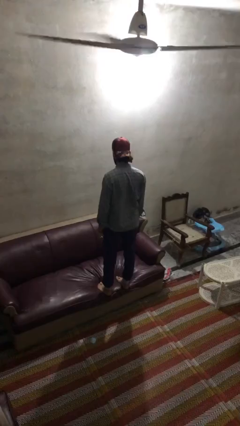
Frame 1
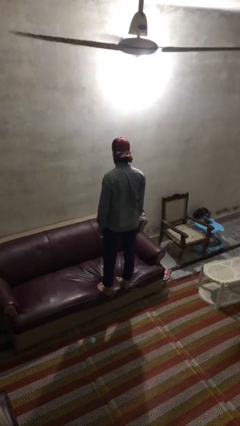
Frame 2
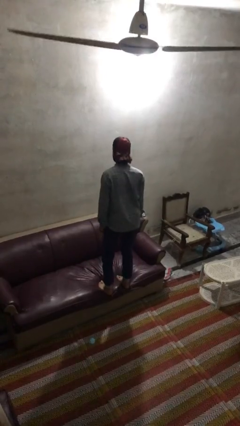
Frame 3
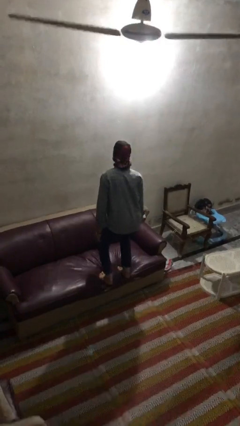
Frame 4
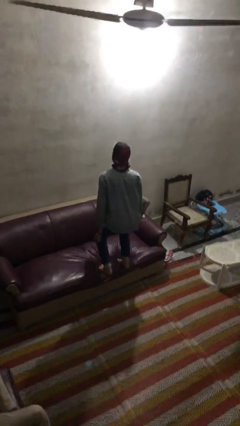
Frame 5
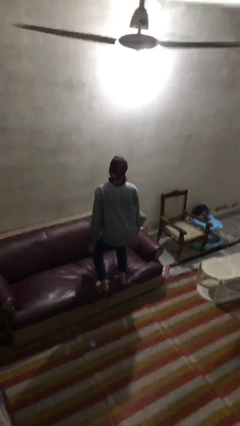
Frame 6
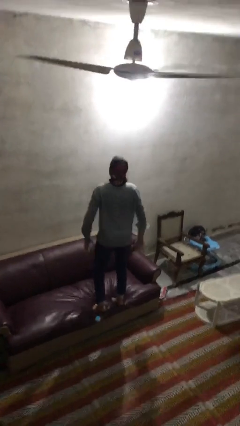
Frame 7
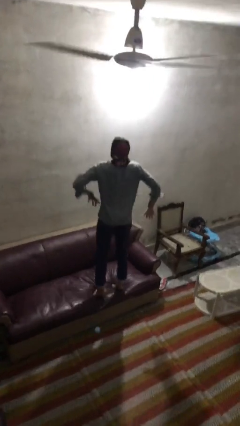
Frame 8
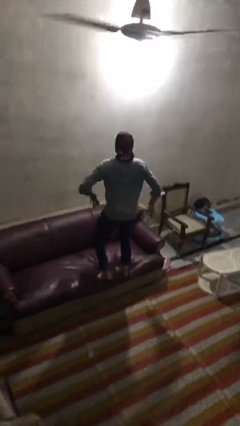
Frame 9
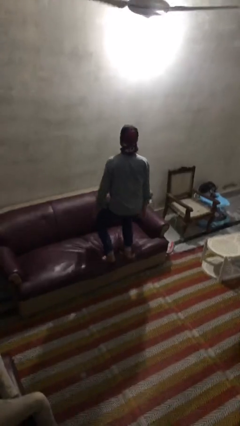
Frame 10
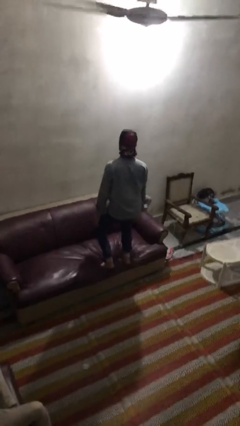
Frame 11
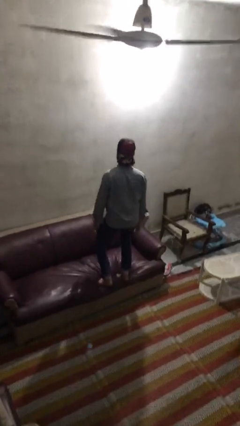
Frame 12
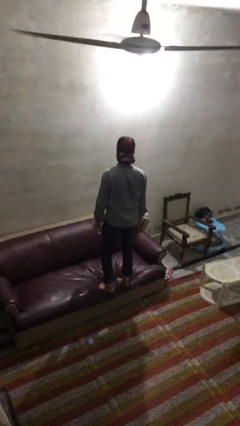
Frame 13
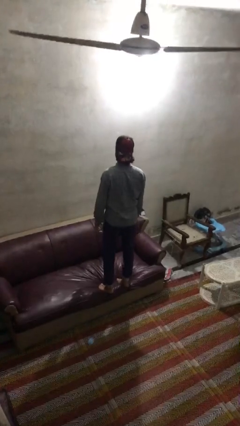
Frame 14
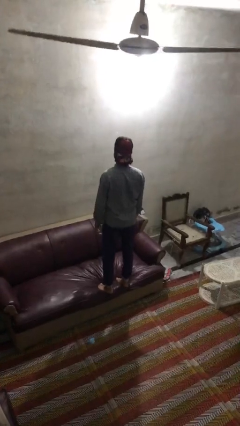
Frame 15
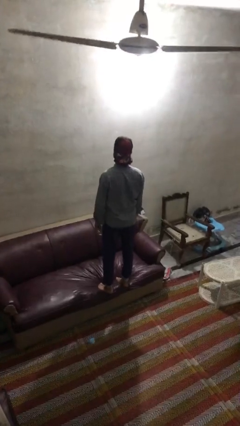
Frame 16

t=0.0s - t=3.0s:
person jumps on couch

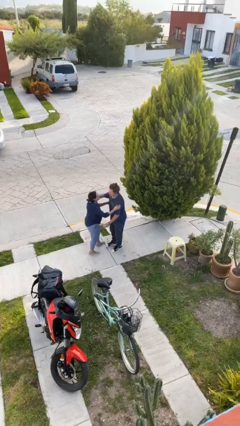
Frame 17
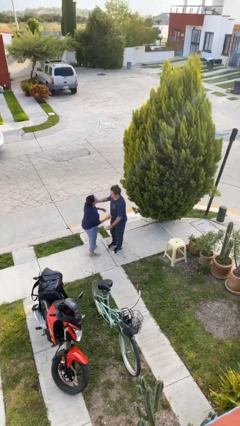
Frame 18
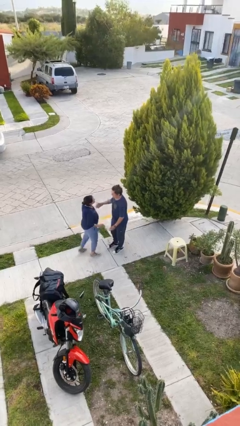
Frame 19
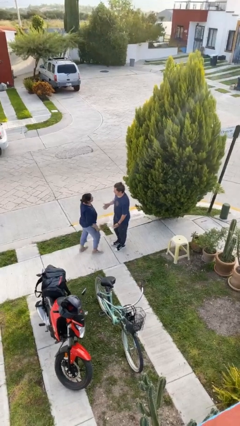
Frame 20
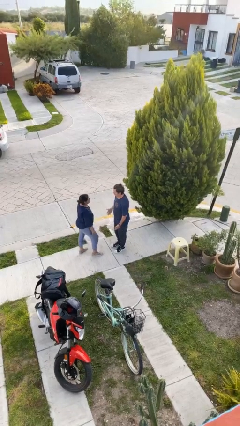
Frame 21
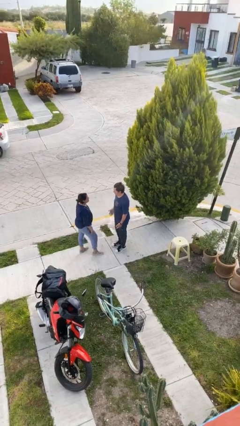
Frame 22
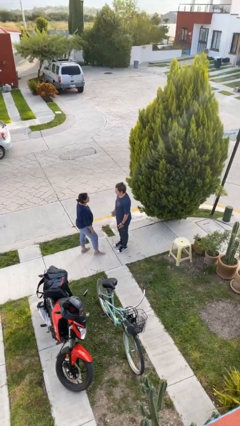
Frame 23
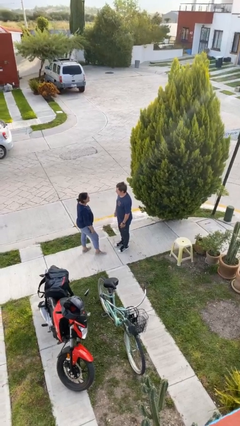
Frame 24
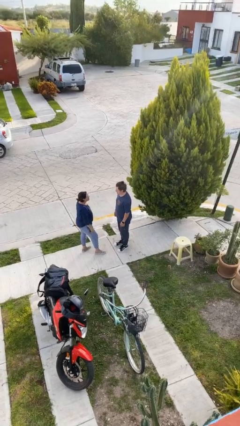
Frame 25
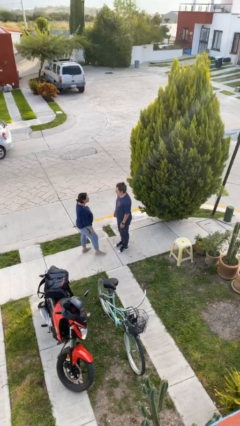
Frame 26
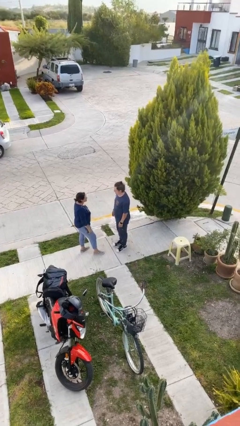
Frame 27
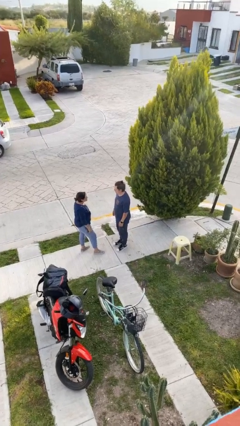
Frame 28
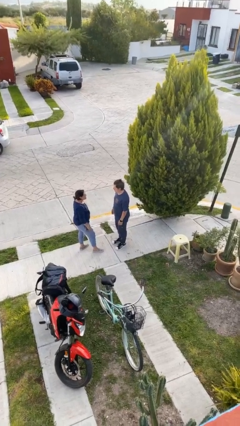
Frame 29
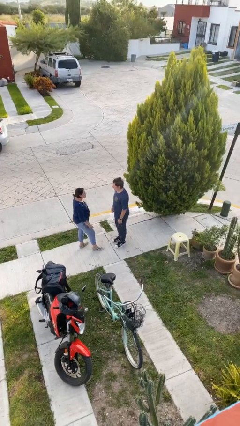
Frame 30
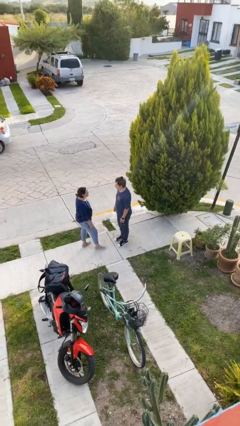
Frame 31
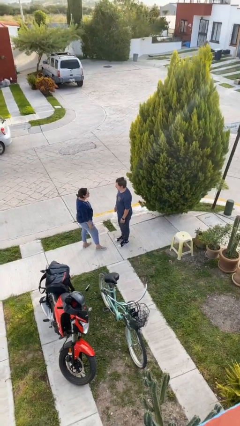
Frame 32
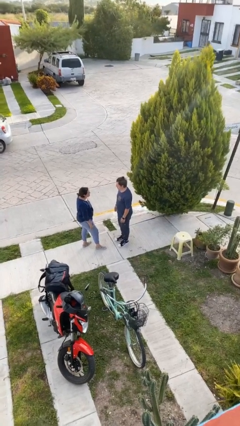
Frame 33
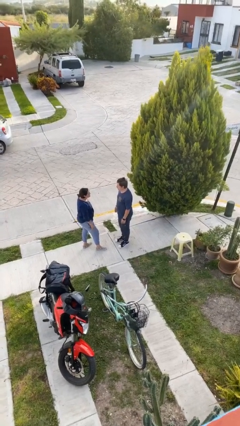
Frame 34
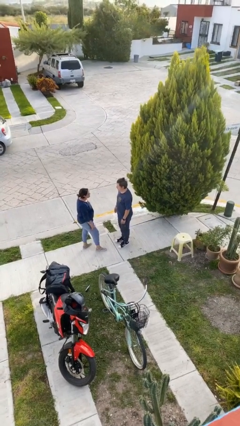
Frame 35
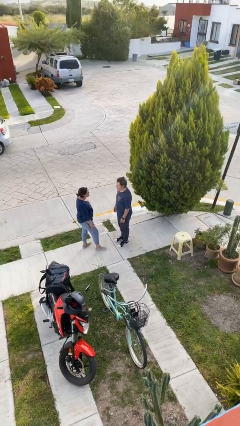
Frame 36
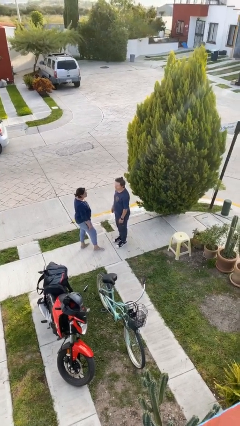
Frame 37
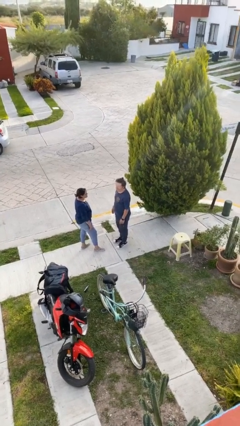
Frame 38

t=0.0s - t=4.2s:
person talks to person

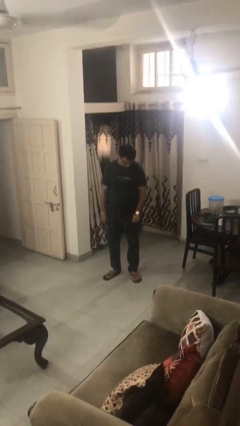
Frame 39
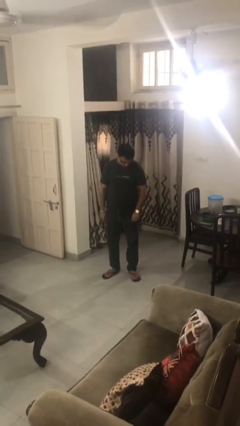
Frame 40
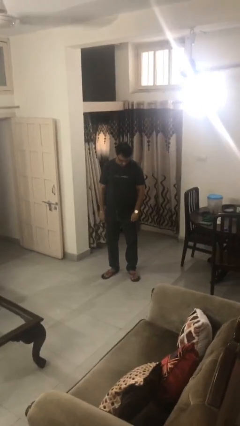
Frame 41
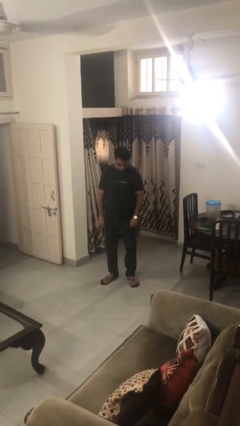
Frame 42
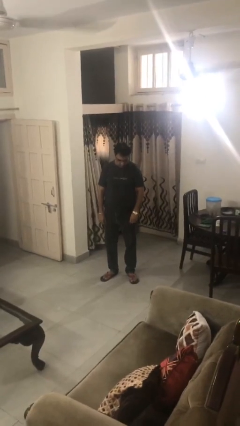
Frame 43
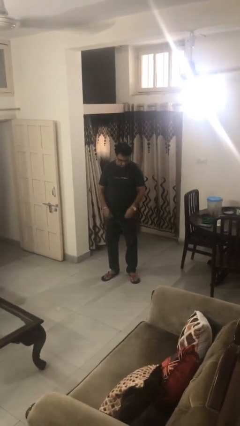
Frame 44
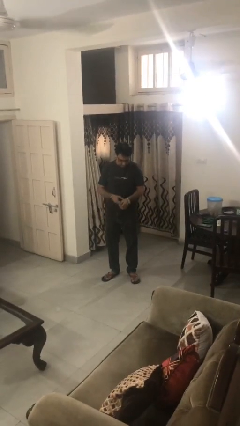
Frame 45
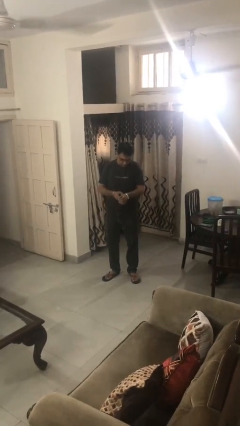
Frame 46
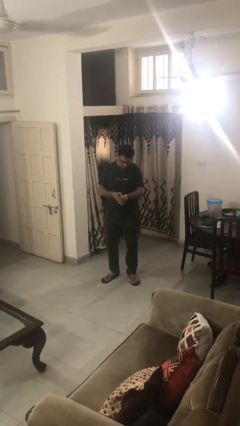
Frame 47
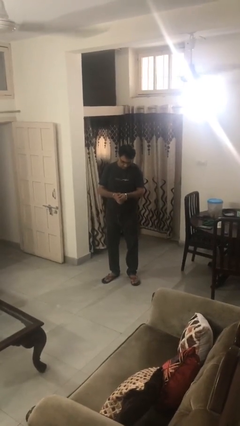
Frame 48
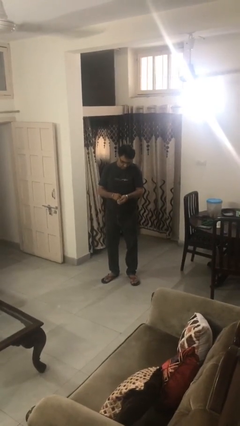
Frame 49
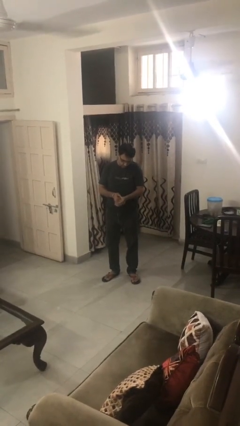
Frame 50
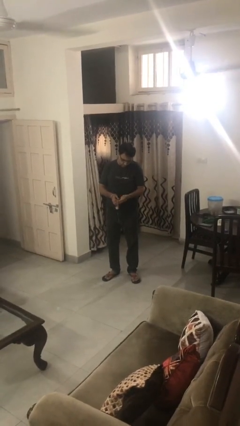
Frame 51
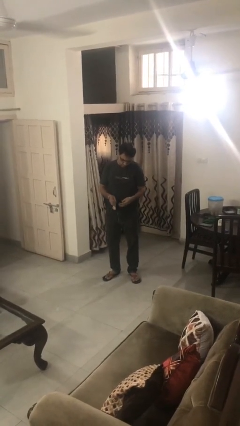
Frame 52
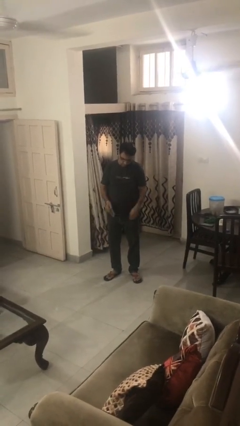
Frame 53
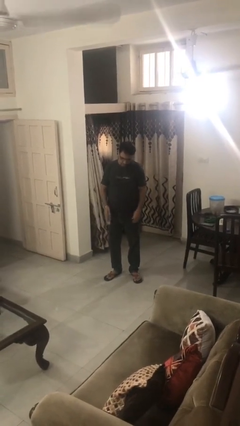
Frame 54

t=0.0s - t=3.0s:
person takes off wristwatch

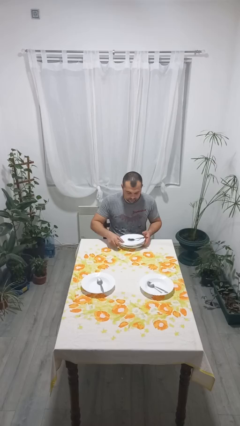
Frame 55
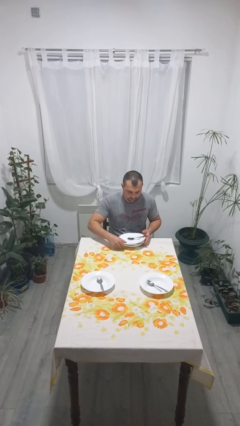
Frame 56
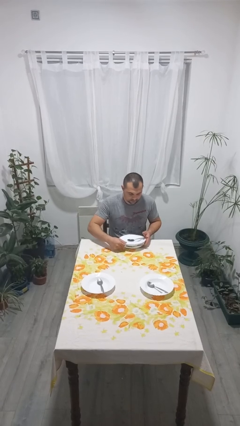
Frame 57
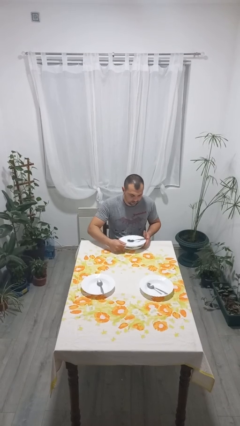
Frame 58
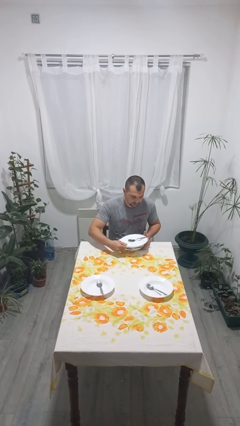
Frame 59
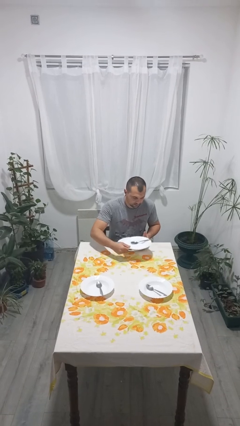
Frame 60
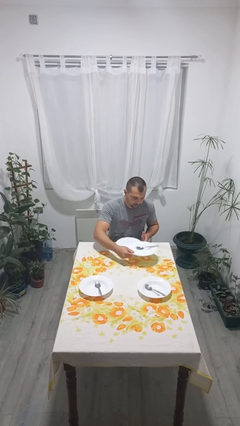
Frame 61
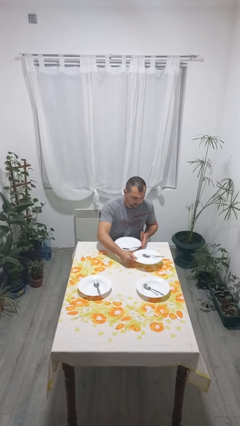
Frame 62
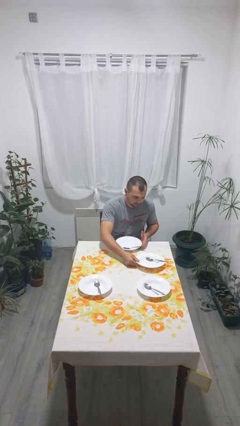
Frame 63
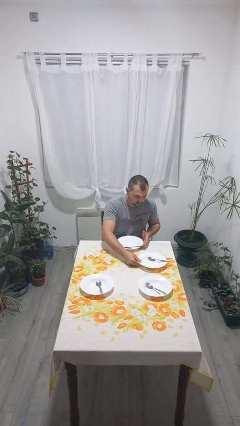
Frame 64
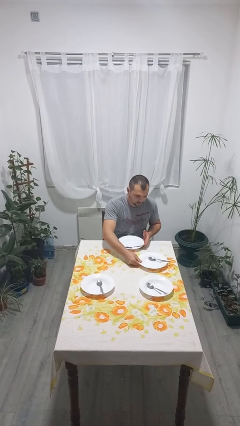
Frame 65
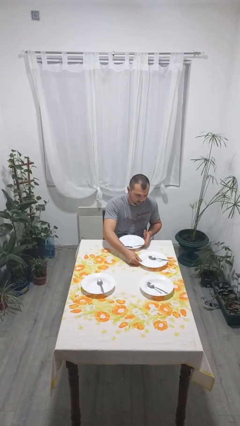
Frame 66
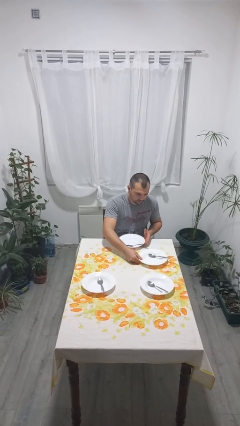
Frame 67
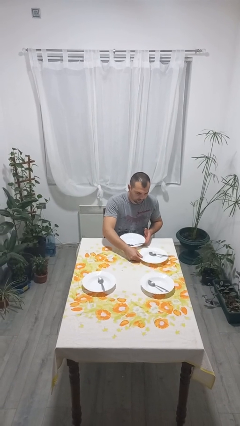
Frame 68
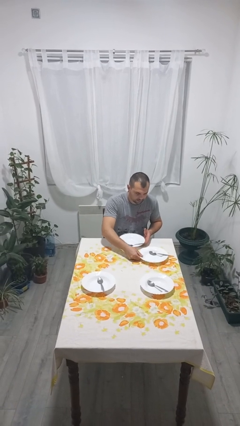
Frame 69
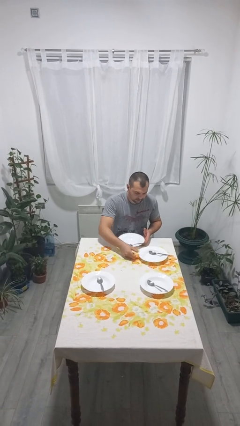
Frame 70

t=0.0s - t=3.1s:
person sets table

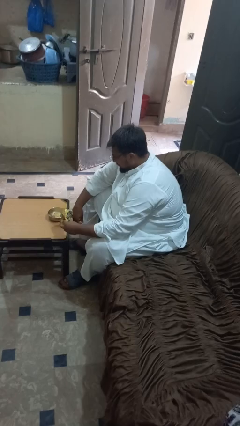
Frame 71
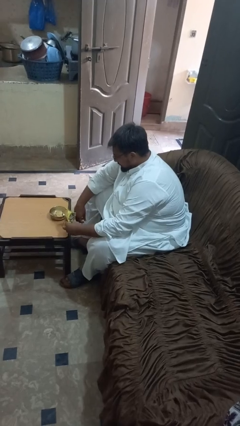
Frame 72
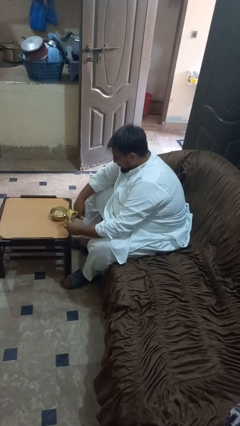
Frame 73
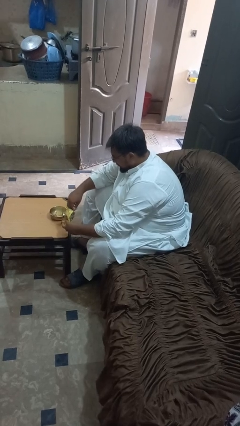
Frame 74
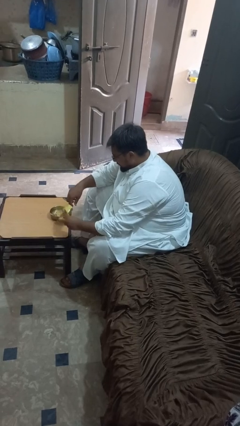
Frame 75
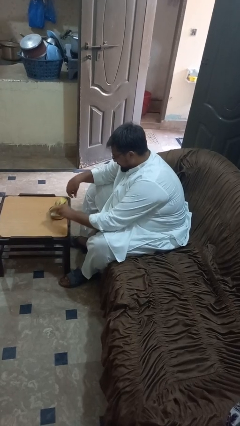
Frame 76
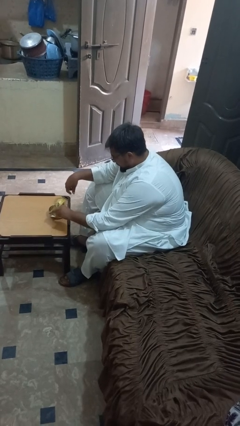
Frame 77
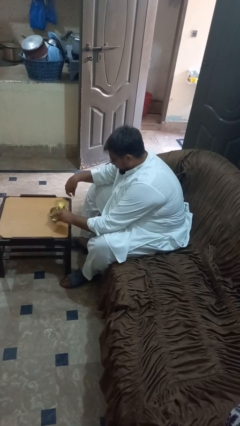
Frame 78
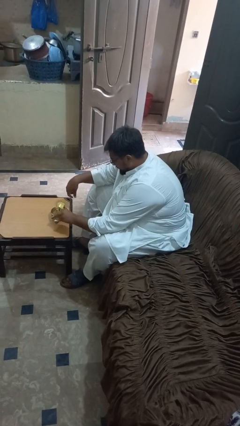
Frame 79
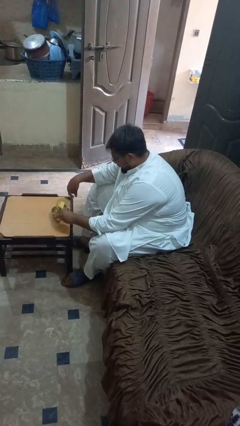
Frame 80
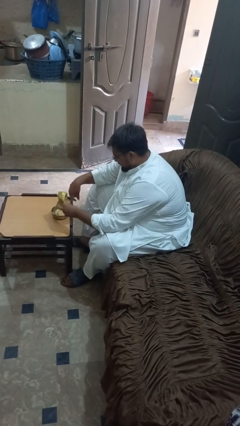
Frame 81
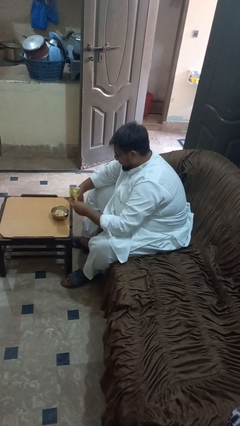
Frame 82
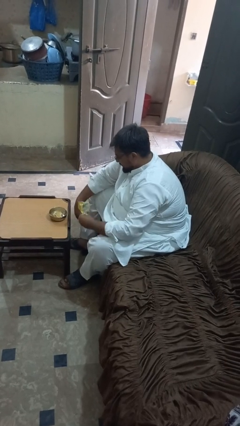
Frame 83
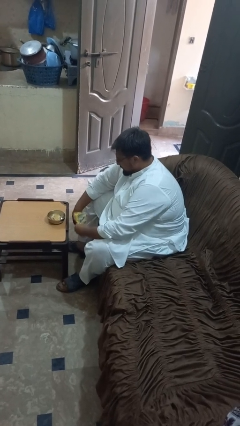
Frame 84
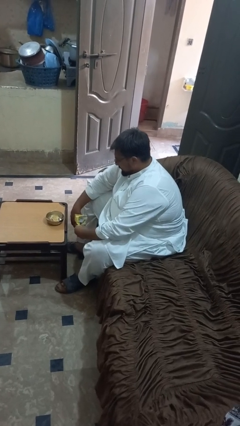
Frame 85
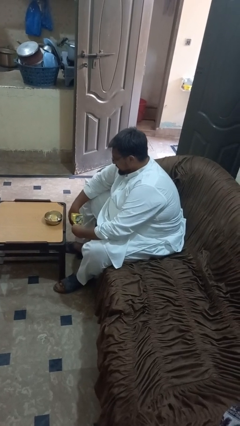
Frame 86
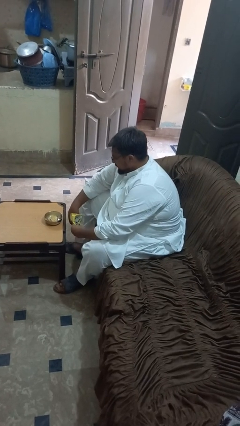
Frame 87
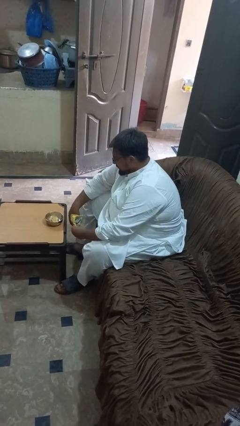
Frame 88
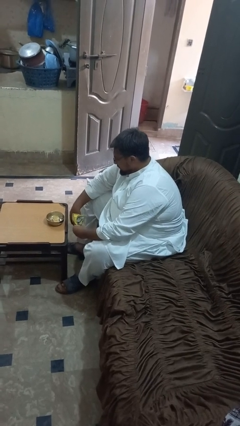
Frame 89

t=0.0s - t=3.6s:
person pours into bowl

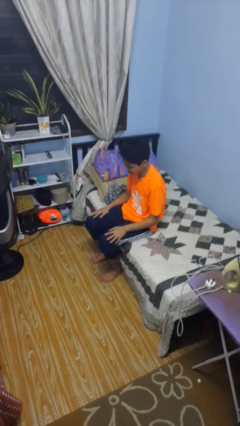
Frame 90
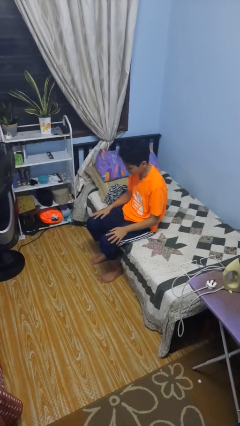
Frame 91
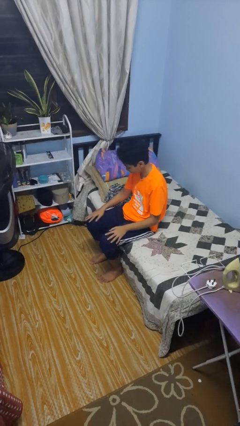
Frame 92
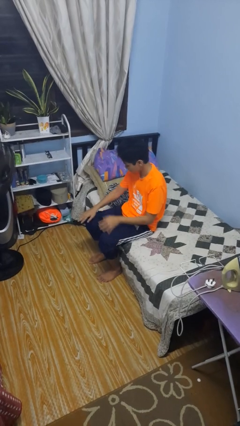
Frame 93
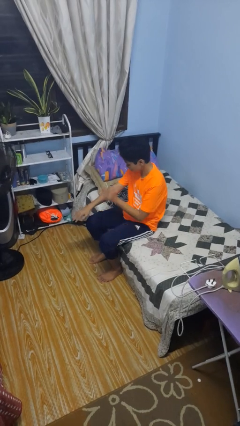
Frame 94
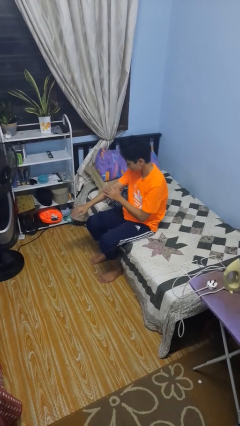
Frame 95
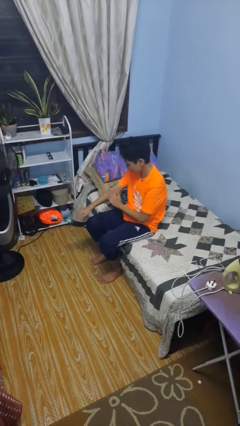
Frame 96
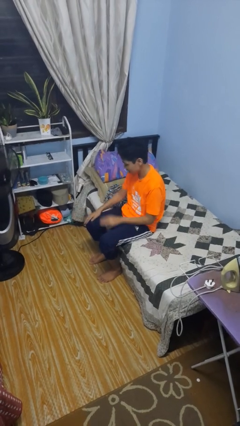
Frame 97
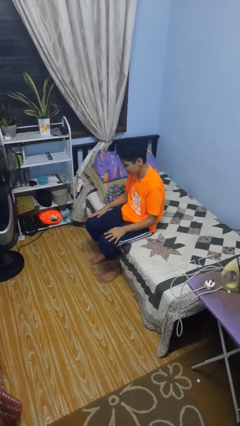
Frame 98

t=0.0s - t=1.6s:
person swats bug
